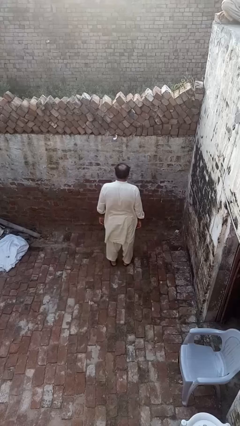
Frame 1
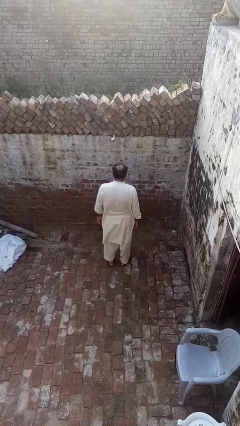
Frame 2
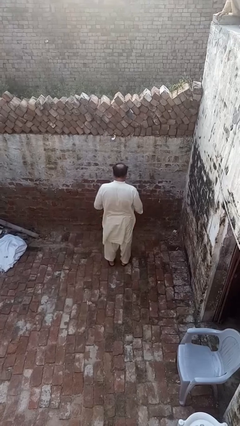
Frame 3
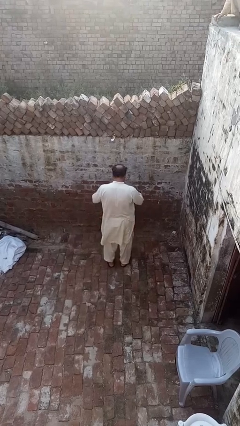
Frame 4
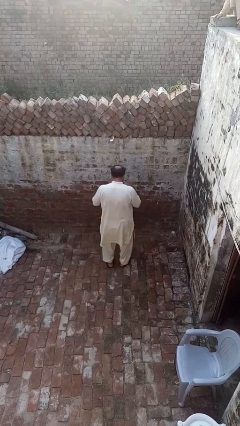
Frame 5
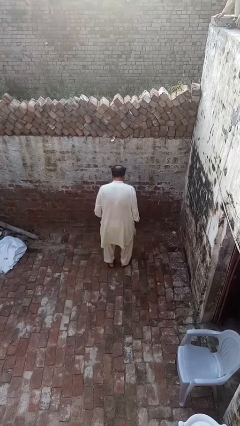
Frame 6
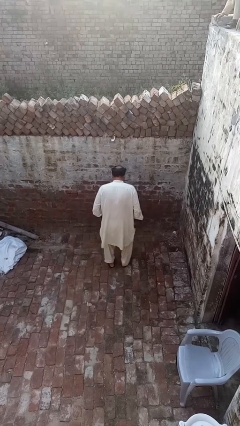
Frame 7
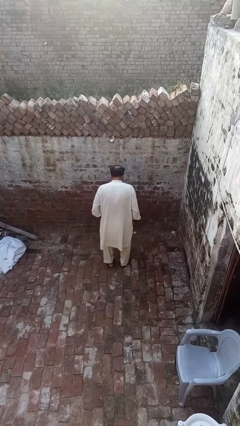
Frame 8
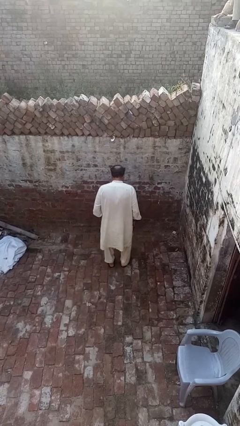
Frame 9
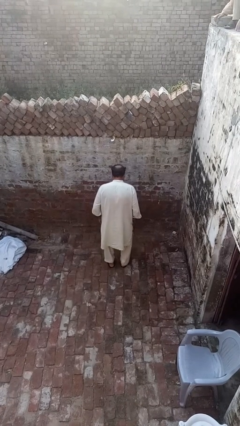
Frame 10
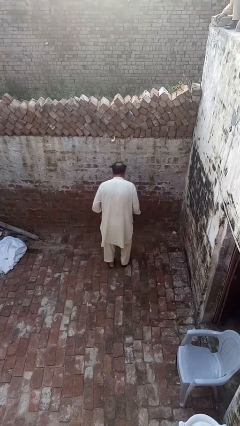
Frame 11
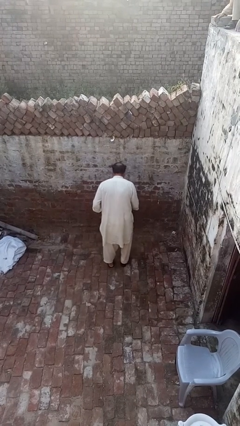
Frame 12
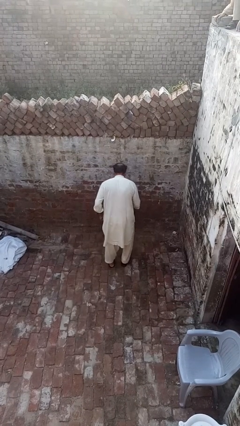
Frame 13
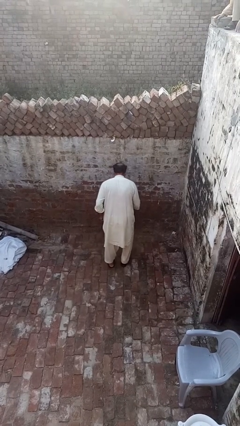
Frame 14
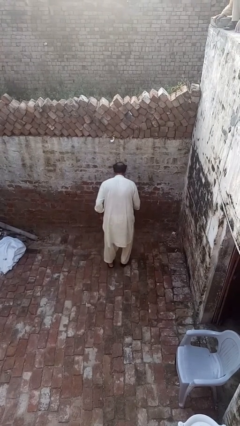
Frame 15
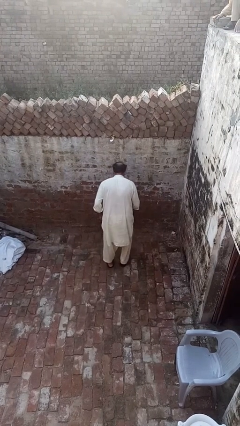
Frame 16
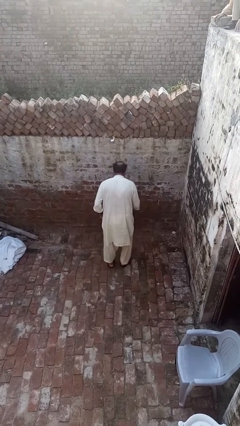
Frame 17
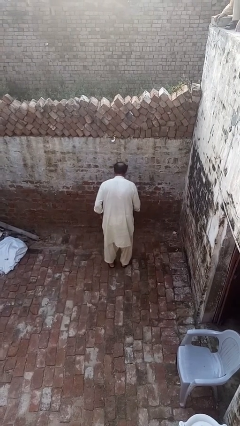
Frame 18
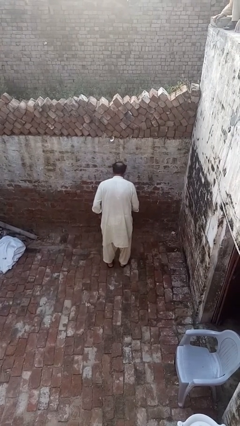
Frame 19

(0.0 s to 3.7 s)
person slaps hands on thighs

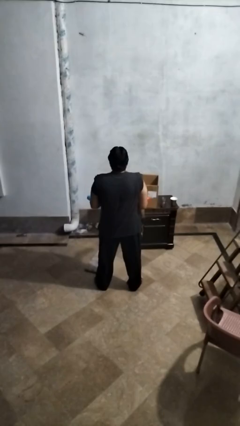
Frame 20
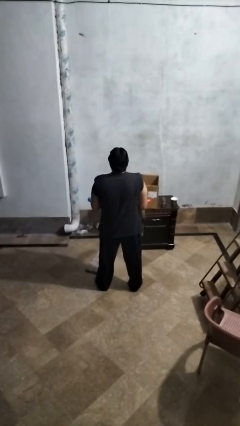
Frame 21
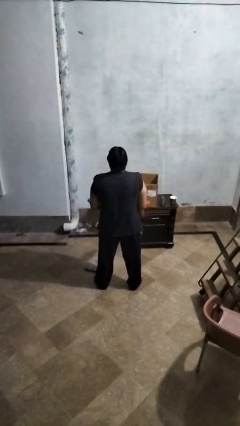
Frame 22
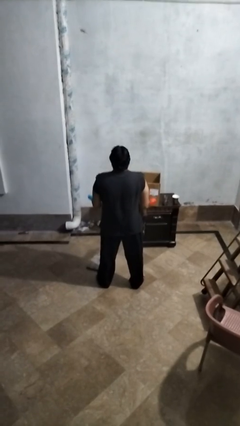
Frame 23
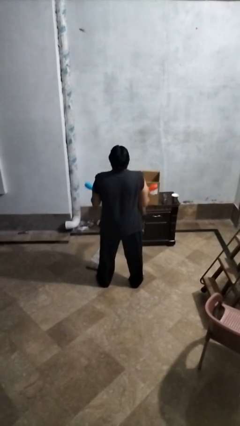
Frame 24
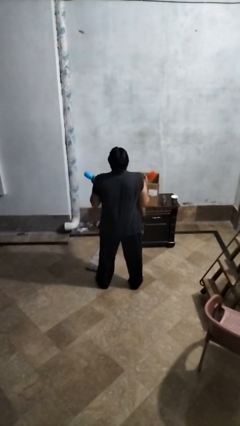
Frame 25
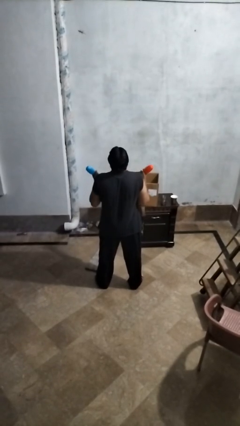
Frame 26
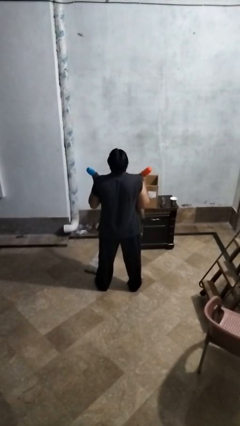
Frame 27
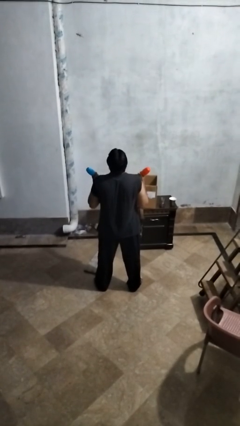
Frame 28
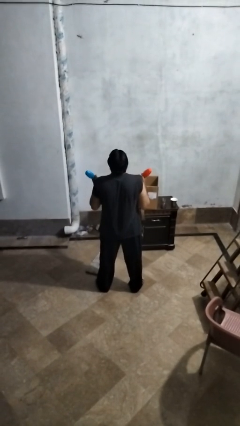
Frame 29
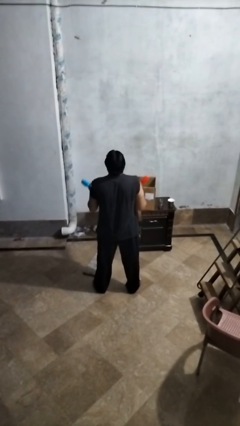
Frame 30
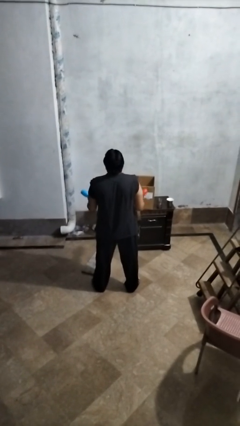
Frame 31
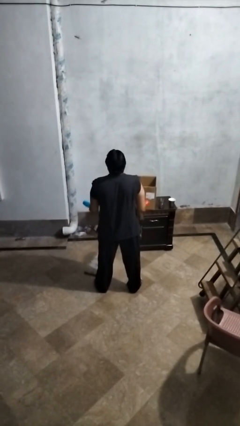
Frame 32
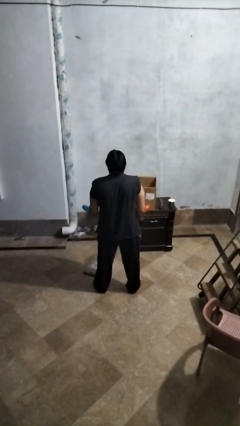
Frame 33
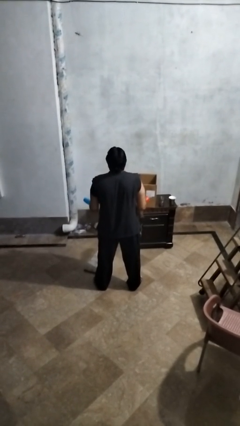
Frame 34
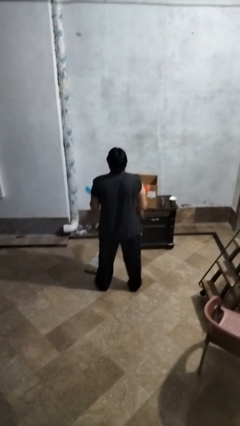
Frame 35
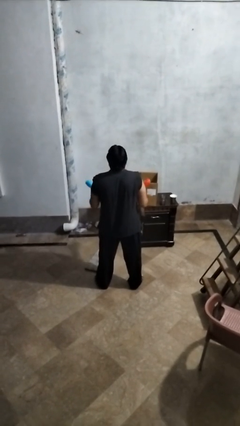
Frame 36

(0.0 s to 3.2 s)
person lifts dumbbells

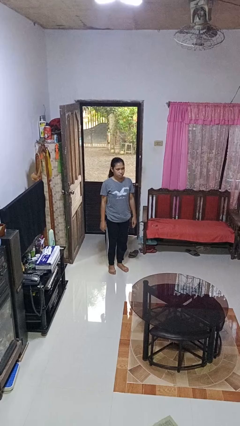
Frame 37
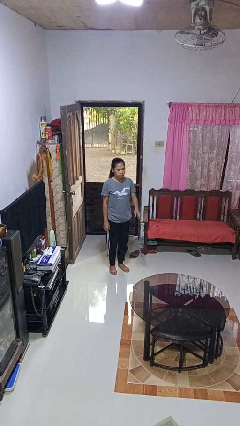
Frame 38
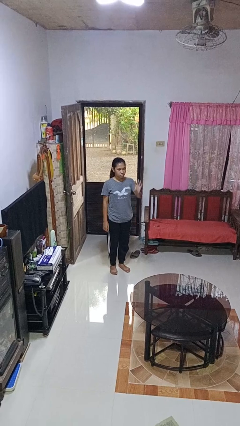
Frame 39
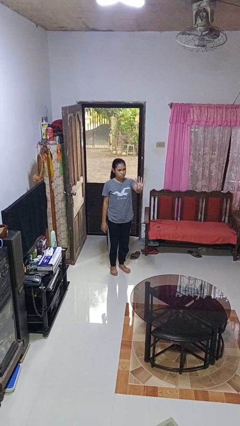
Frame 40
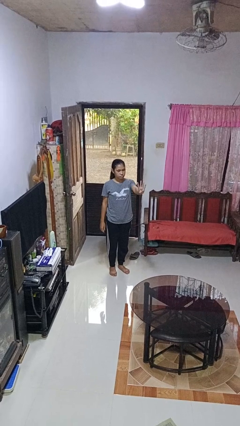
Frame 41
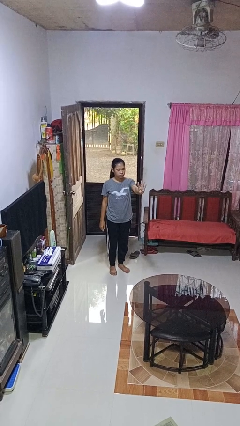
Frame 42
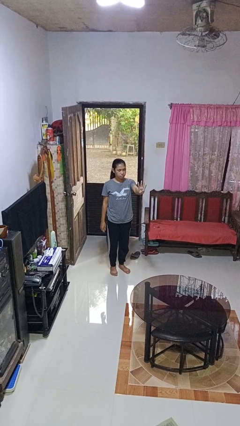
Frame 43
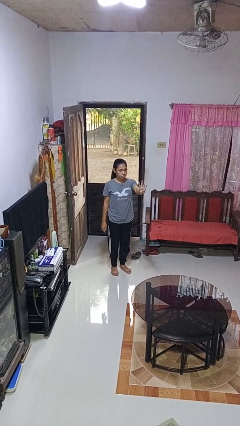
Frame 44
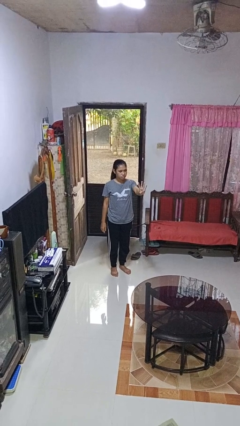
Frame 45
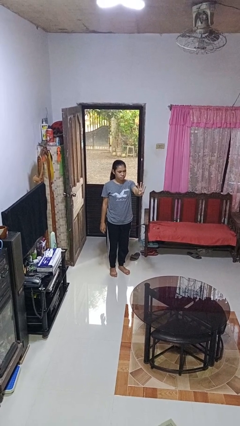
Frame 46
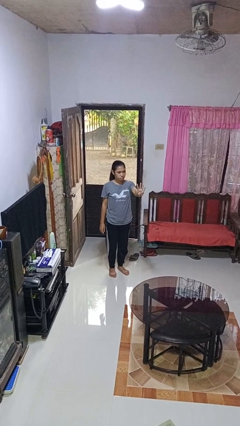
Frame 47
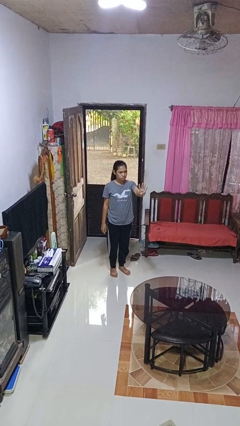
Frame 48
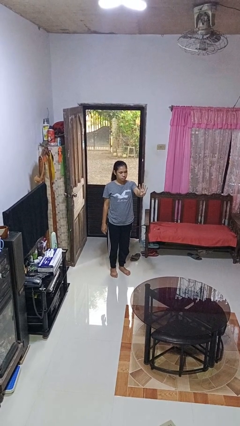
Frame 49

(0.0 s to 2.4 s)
person gestures number four

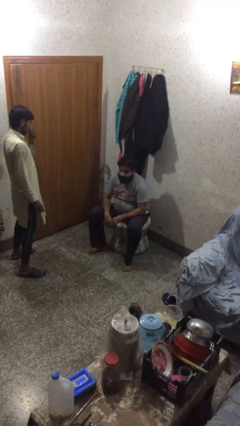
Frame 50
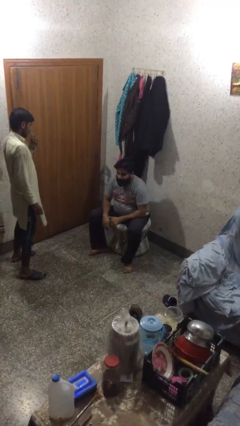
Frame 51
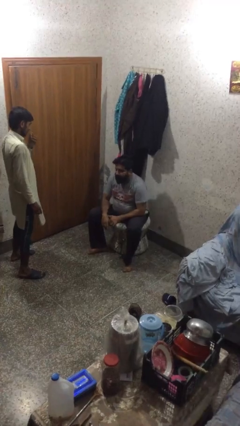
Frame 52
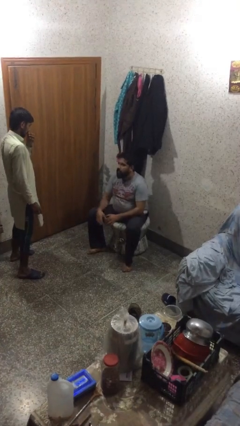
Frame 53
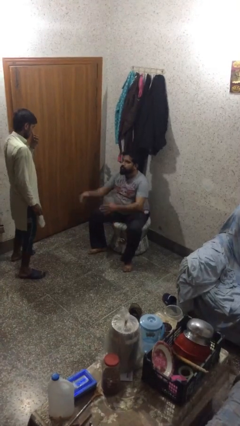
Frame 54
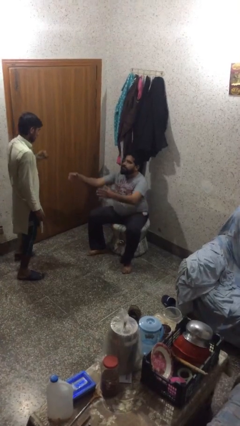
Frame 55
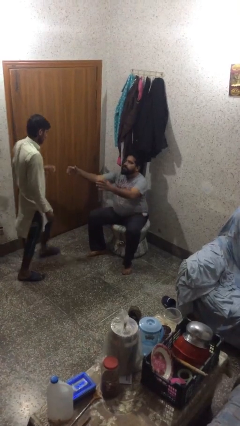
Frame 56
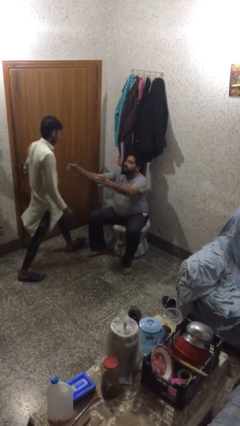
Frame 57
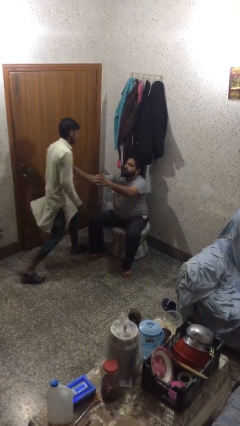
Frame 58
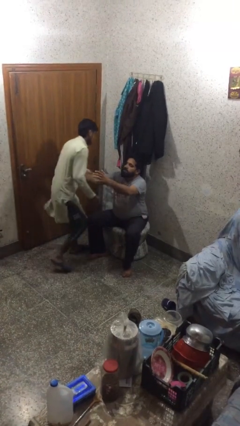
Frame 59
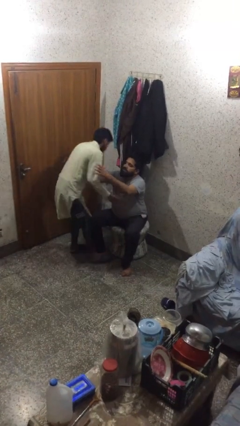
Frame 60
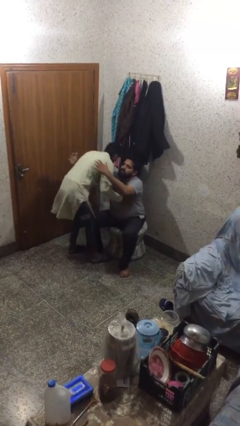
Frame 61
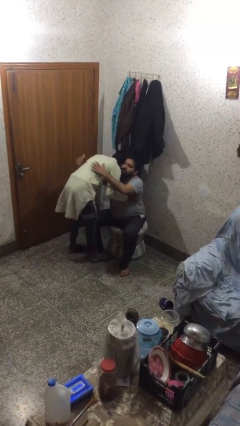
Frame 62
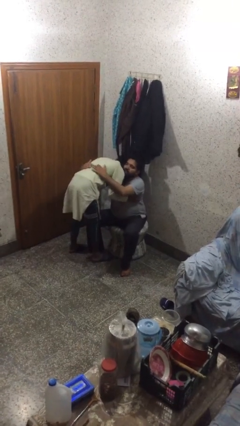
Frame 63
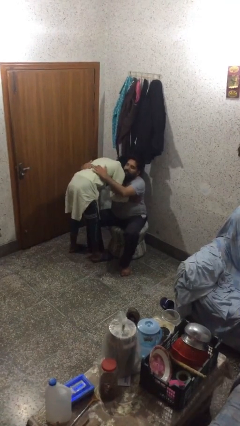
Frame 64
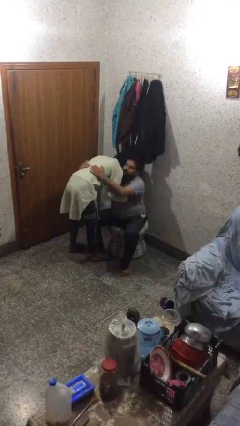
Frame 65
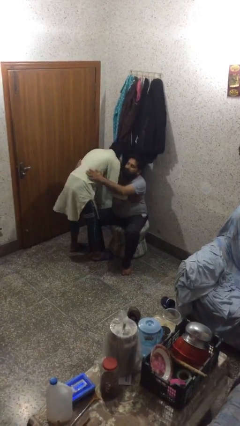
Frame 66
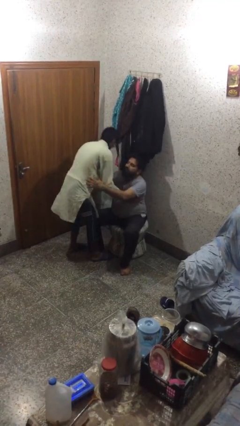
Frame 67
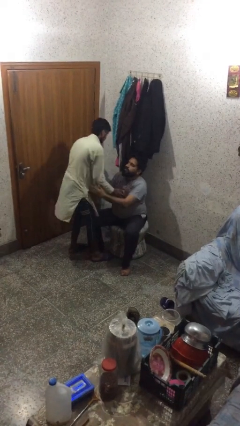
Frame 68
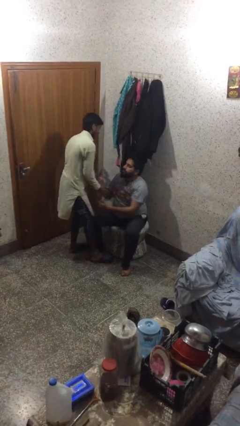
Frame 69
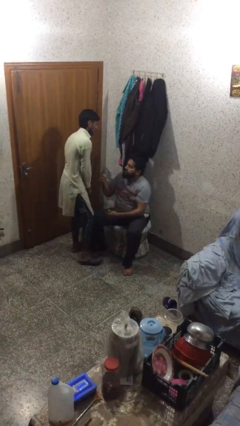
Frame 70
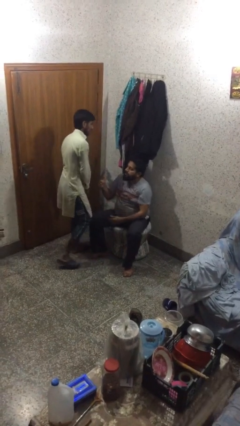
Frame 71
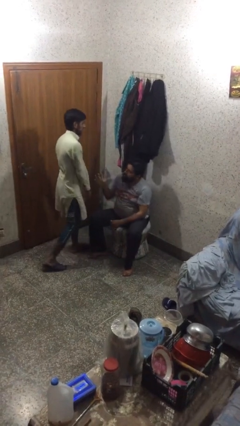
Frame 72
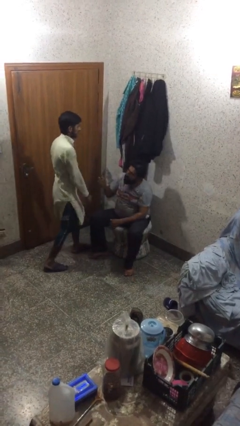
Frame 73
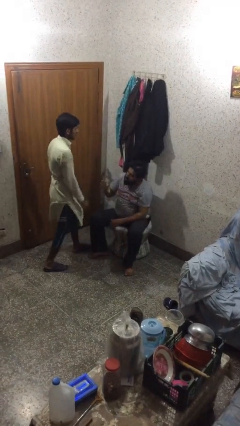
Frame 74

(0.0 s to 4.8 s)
person embraces person

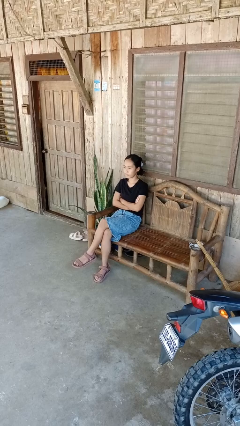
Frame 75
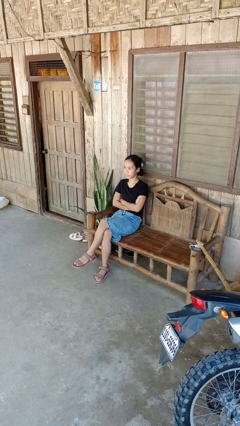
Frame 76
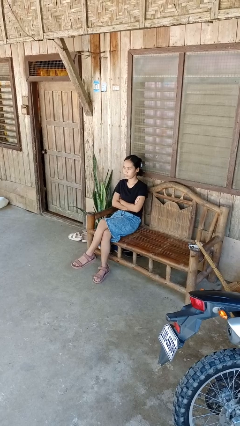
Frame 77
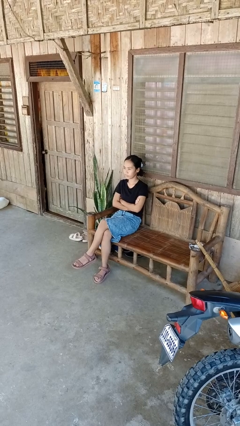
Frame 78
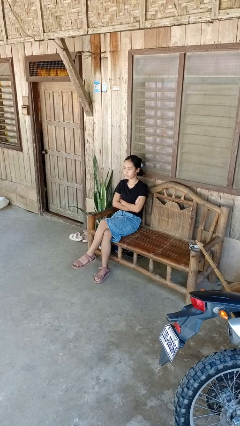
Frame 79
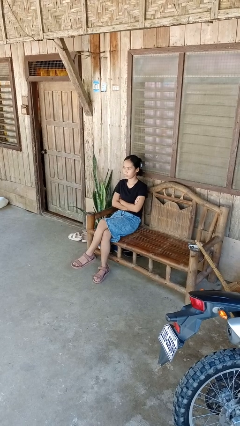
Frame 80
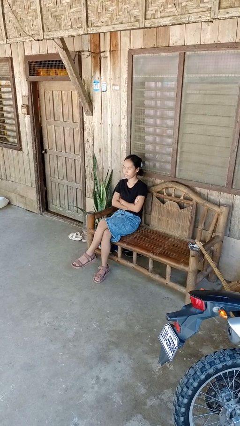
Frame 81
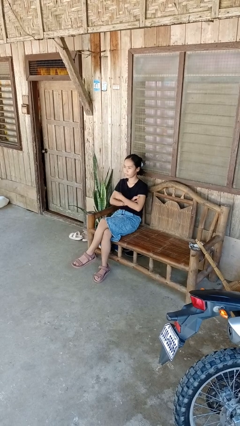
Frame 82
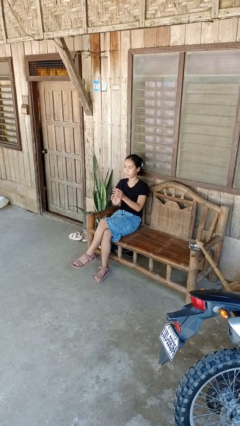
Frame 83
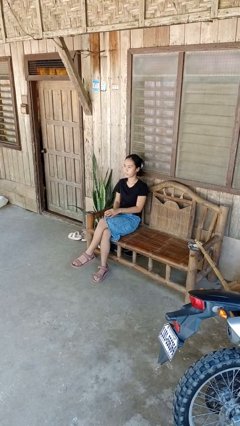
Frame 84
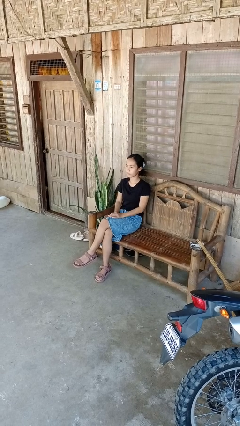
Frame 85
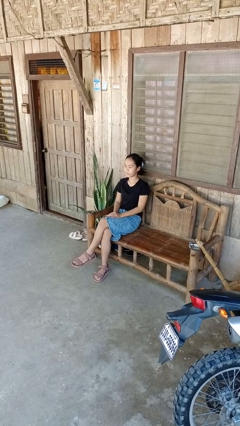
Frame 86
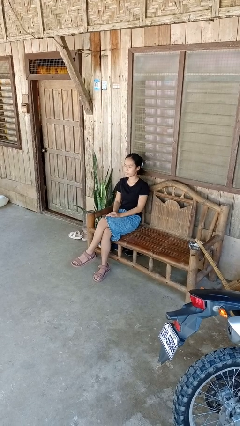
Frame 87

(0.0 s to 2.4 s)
person crosses arms

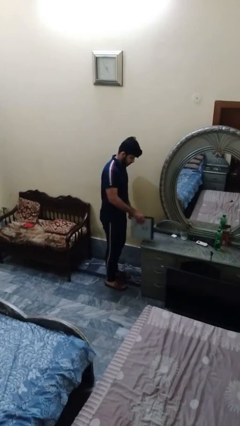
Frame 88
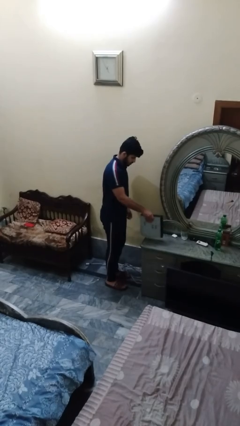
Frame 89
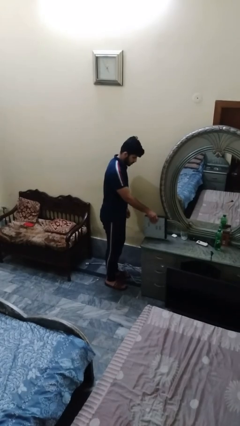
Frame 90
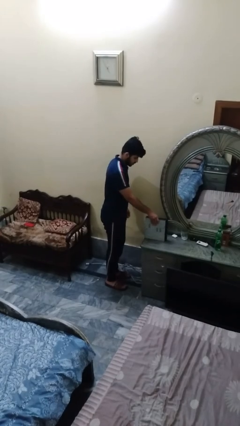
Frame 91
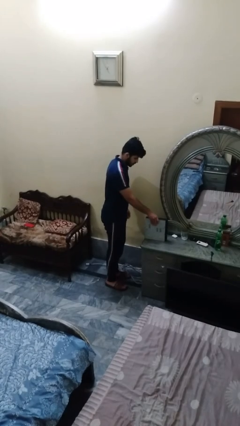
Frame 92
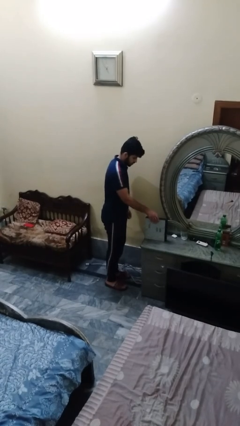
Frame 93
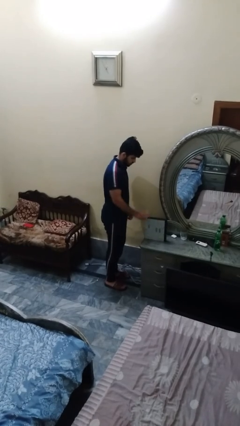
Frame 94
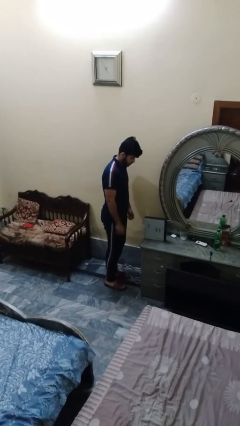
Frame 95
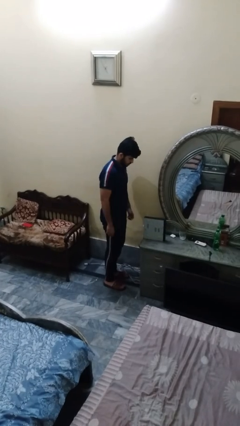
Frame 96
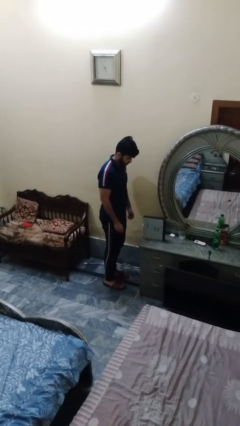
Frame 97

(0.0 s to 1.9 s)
person puts down object on countertop
